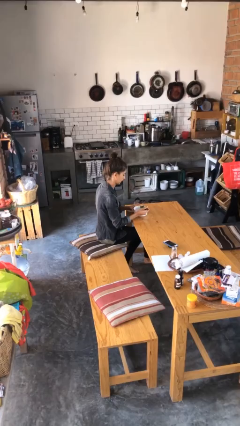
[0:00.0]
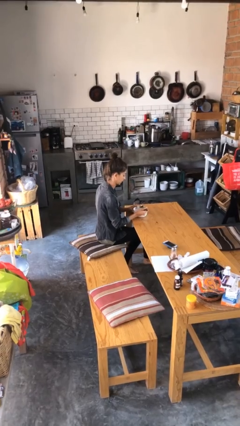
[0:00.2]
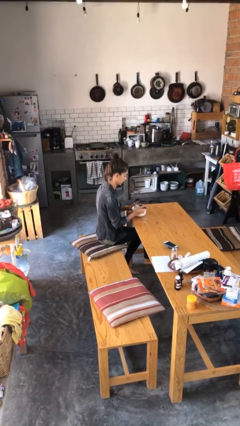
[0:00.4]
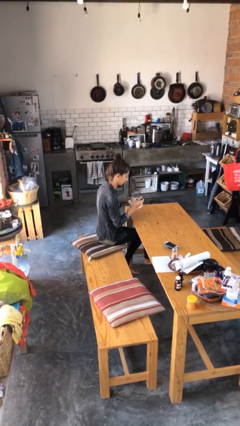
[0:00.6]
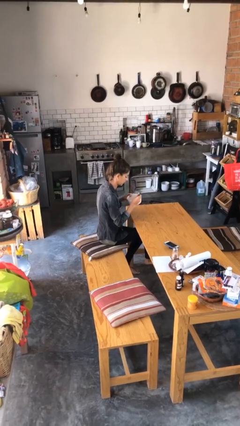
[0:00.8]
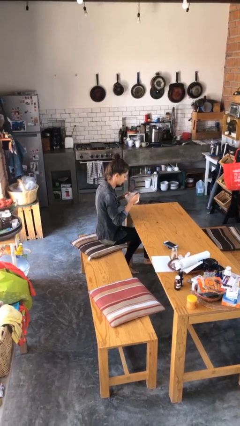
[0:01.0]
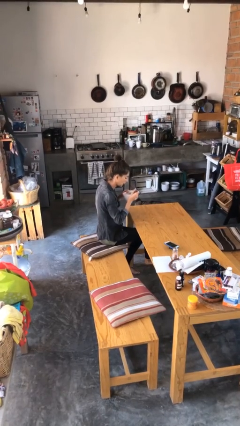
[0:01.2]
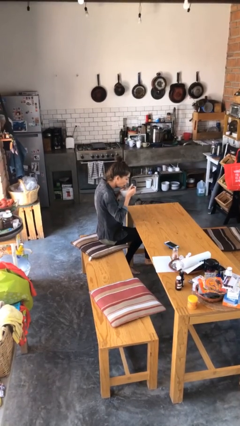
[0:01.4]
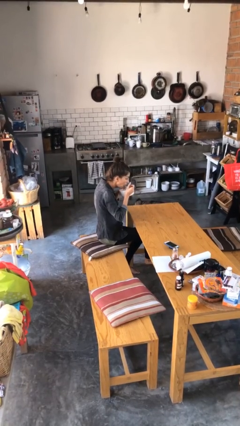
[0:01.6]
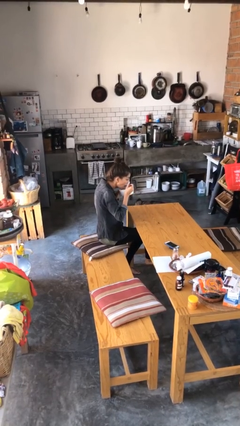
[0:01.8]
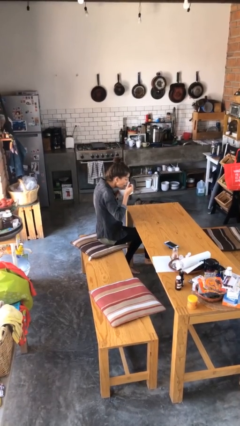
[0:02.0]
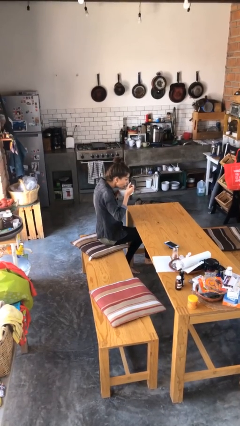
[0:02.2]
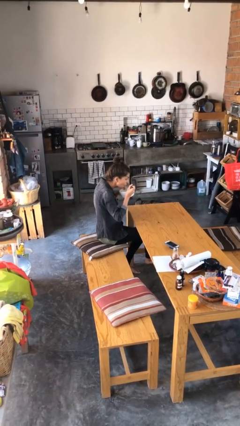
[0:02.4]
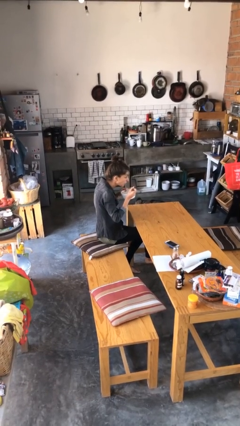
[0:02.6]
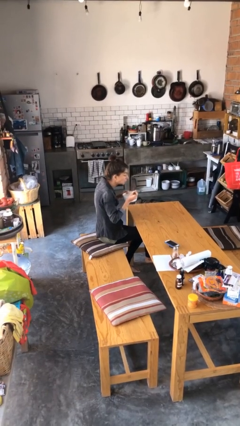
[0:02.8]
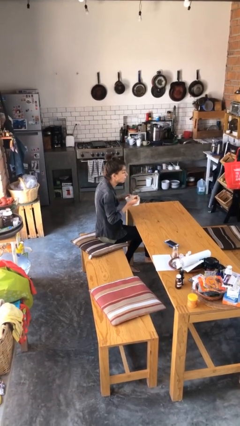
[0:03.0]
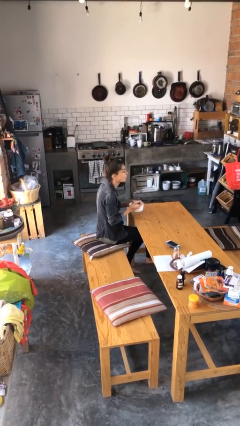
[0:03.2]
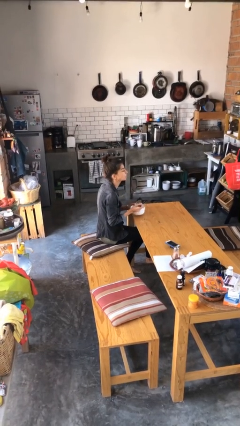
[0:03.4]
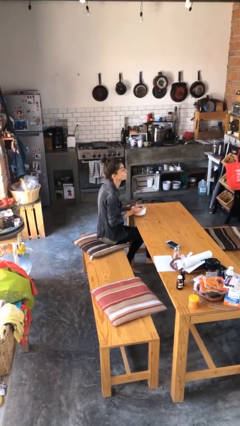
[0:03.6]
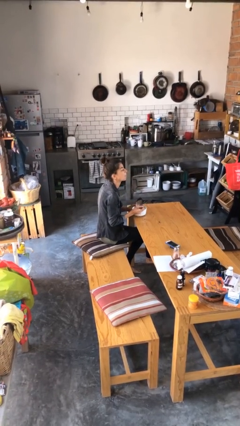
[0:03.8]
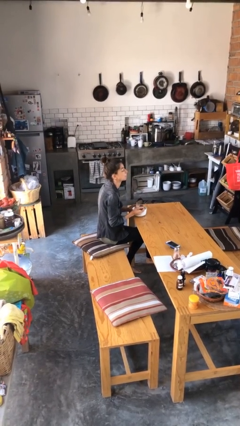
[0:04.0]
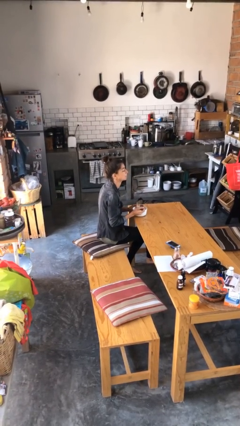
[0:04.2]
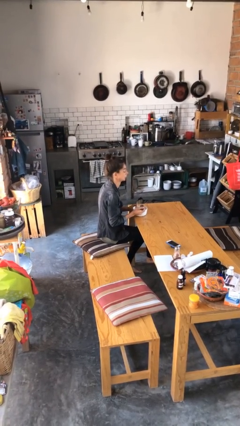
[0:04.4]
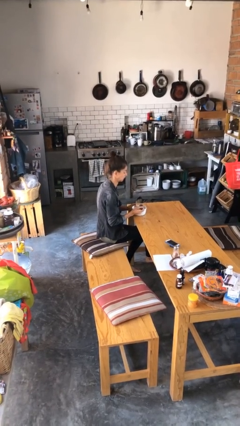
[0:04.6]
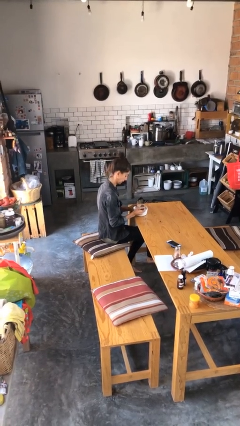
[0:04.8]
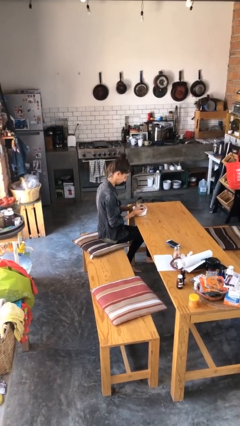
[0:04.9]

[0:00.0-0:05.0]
person eats with utensil

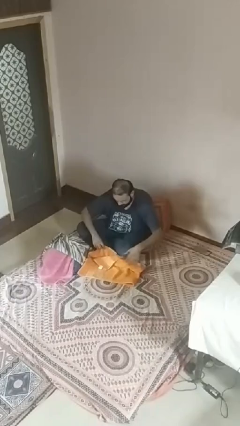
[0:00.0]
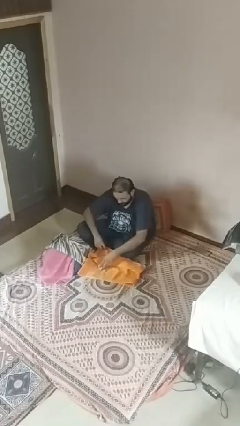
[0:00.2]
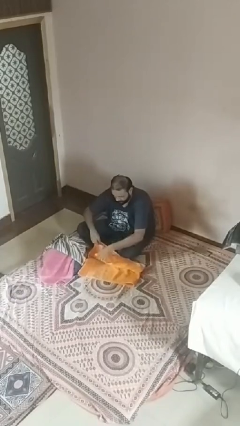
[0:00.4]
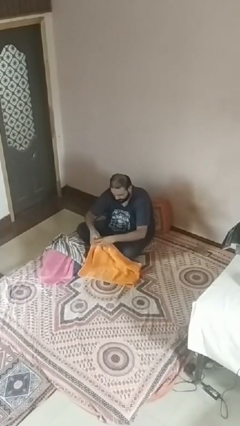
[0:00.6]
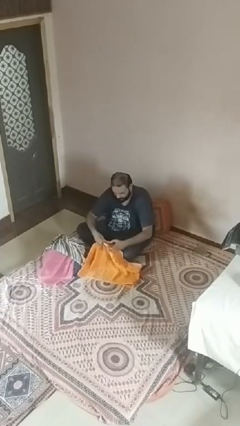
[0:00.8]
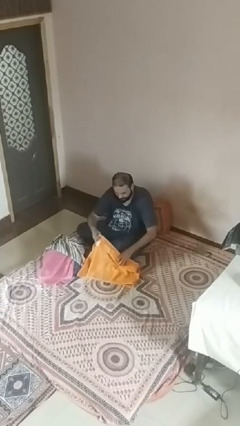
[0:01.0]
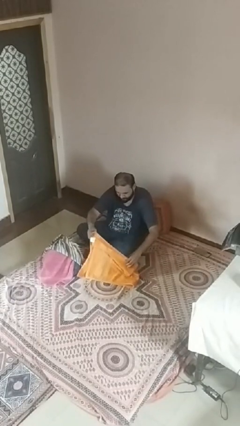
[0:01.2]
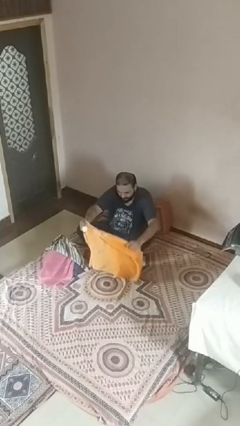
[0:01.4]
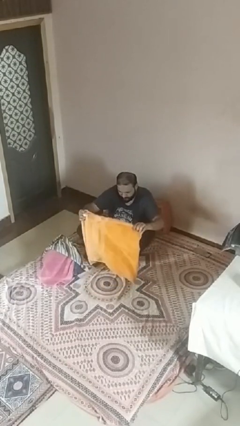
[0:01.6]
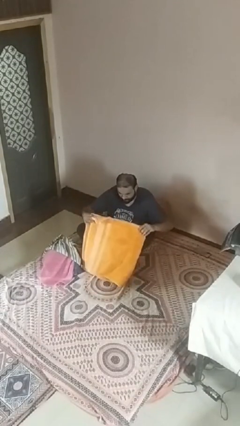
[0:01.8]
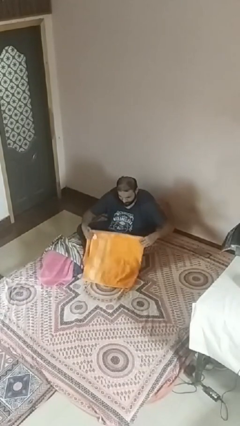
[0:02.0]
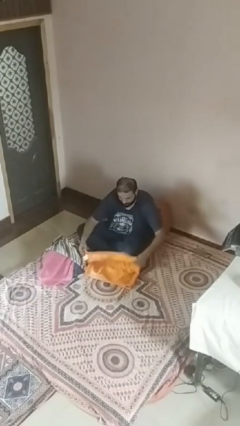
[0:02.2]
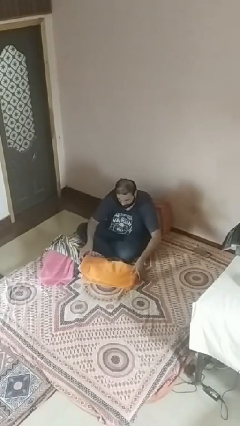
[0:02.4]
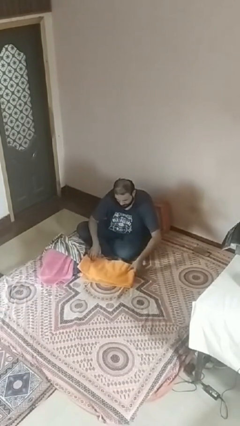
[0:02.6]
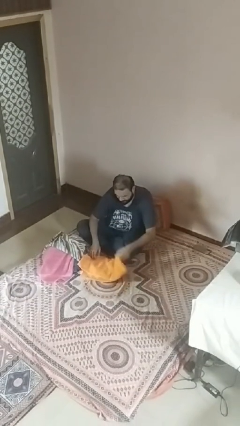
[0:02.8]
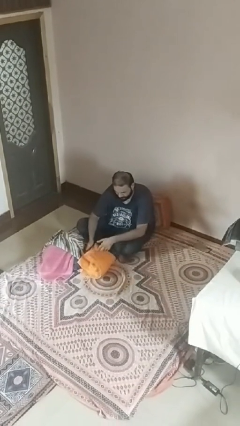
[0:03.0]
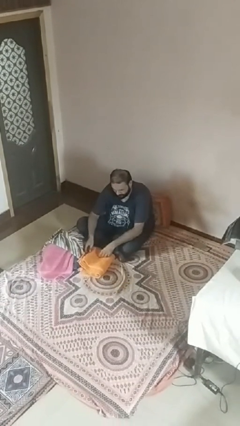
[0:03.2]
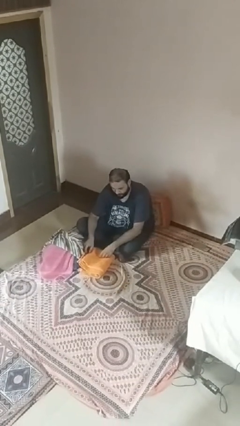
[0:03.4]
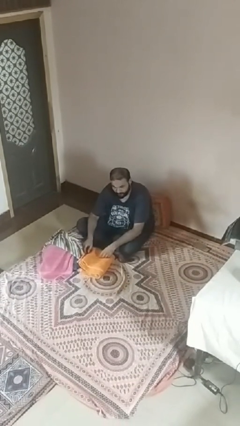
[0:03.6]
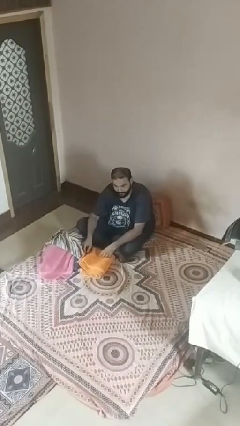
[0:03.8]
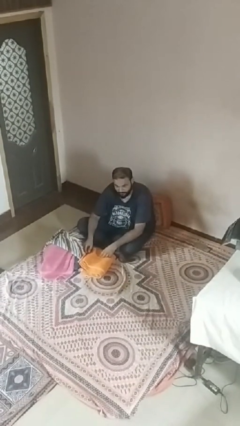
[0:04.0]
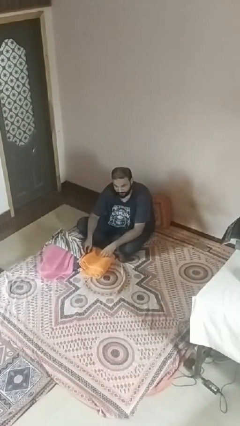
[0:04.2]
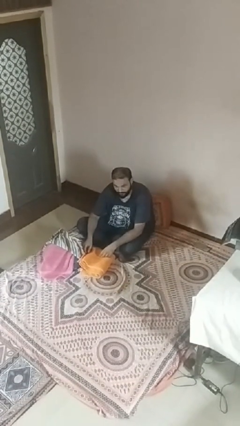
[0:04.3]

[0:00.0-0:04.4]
person folds towel

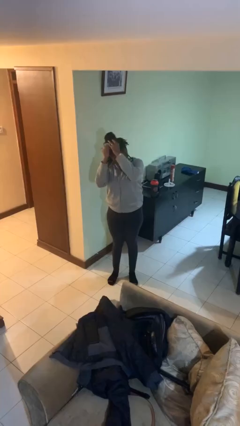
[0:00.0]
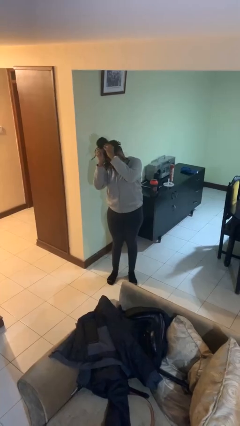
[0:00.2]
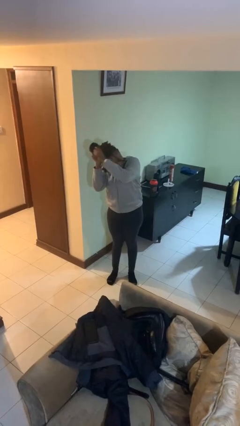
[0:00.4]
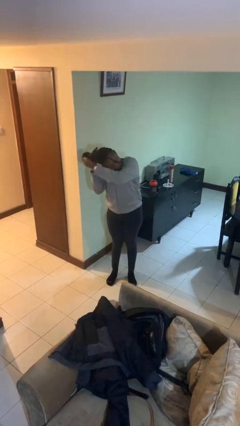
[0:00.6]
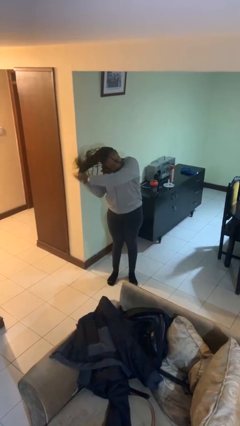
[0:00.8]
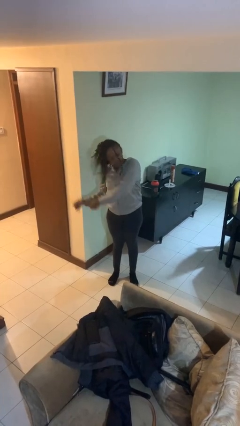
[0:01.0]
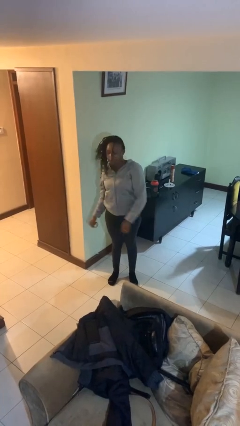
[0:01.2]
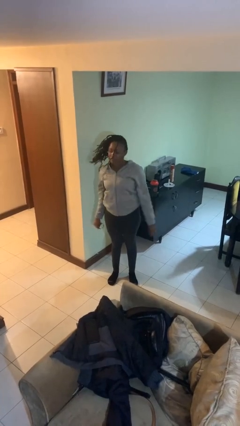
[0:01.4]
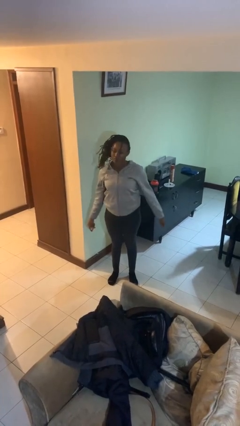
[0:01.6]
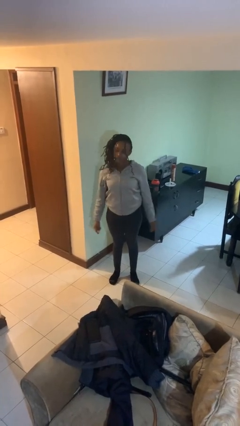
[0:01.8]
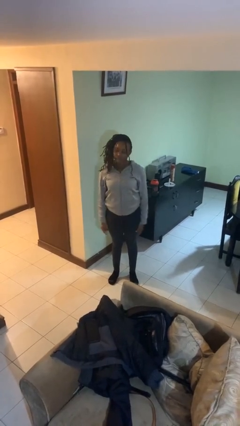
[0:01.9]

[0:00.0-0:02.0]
person takes off hairtie

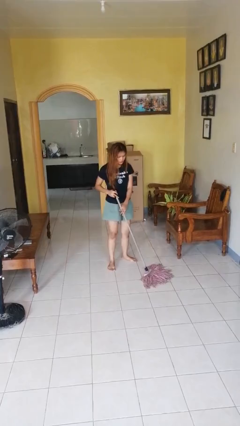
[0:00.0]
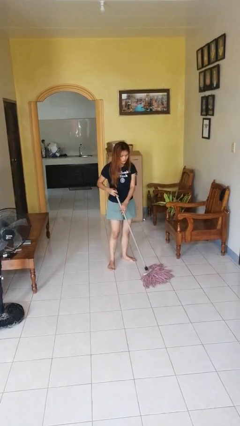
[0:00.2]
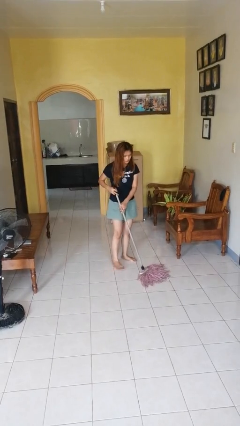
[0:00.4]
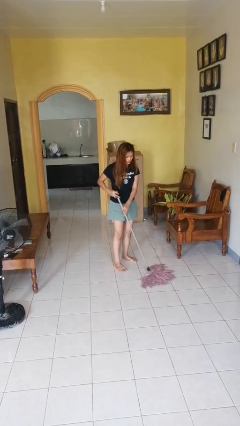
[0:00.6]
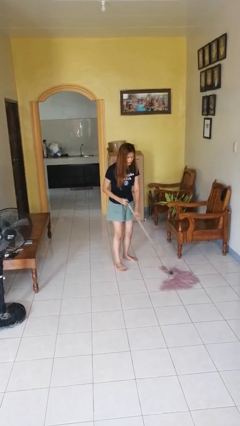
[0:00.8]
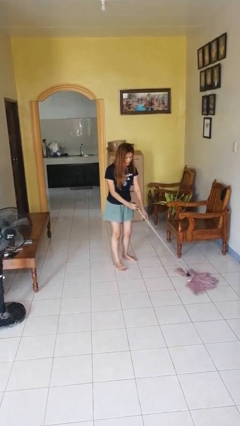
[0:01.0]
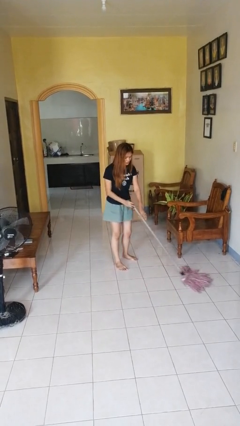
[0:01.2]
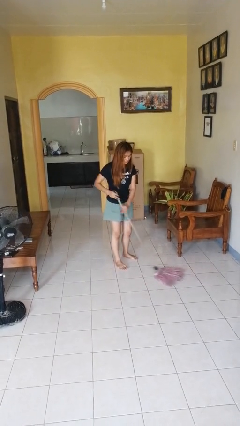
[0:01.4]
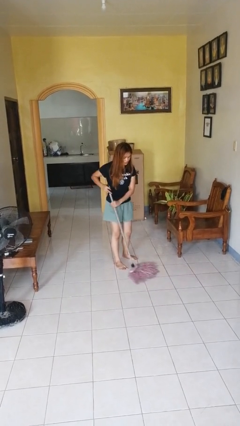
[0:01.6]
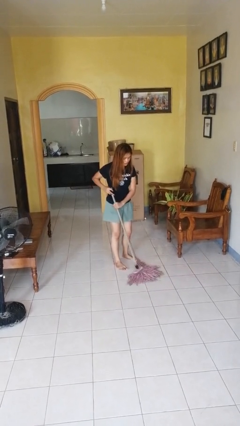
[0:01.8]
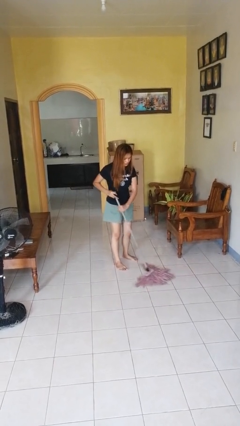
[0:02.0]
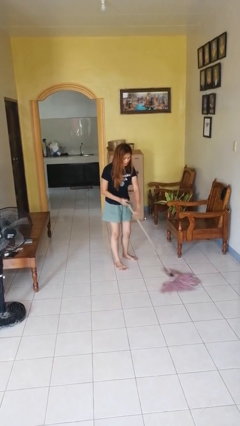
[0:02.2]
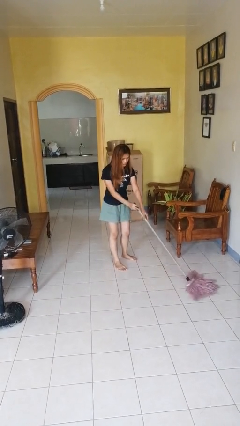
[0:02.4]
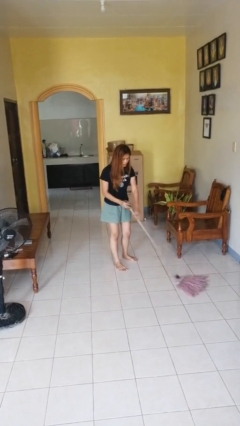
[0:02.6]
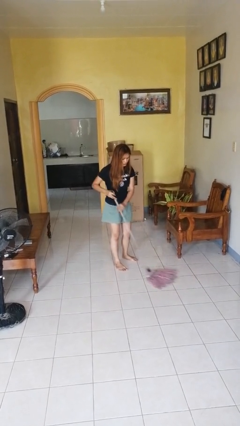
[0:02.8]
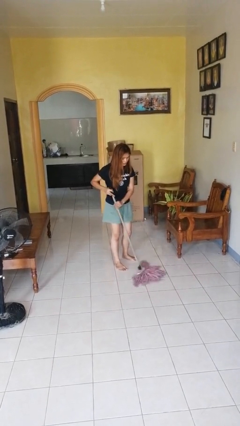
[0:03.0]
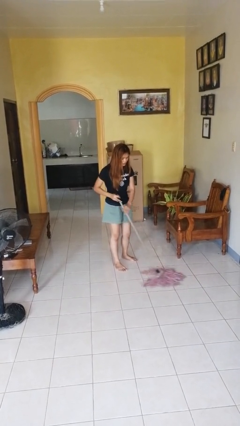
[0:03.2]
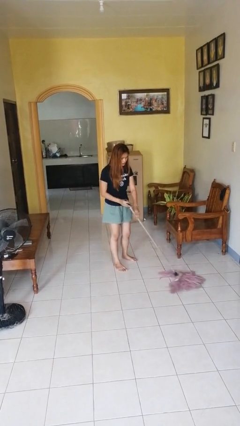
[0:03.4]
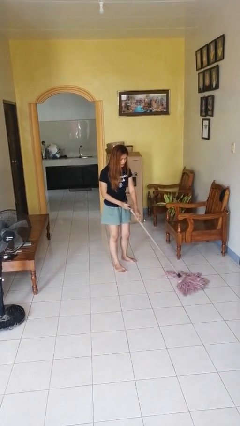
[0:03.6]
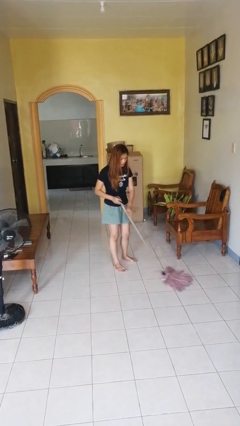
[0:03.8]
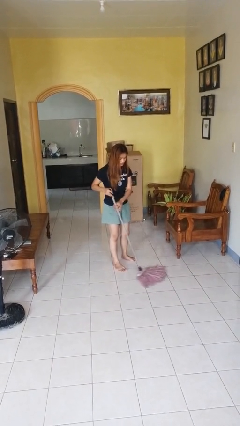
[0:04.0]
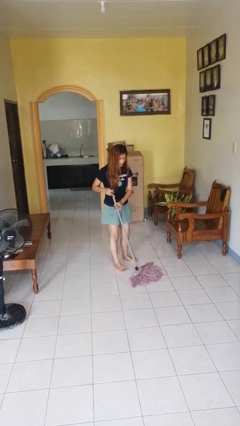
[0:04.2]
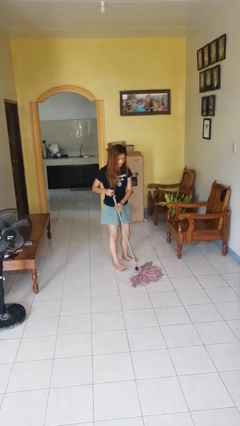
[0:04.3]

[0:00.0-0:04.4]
person mops

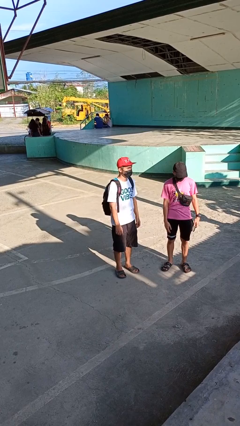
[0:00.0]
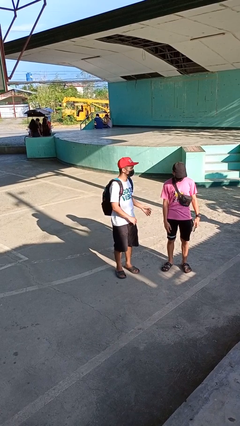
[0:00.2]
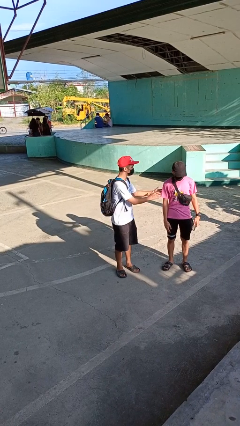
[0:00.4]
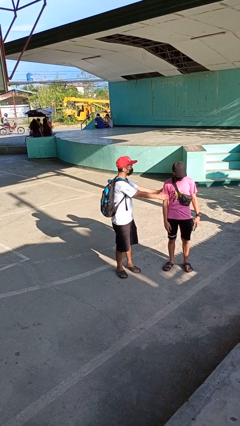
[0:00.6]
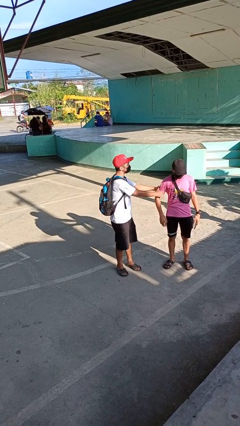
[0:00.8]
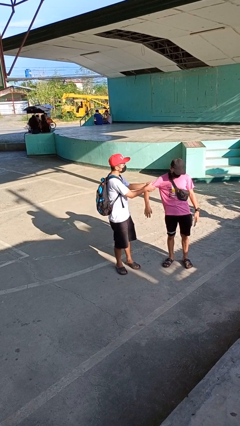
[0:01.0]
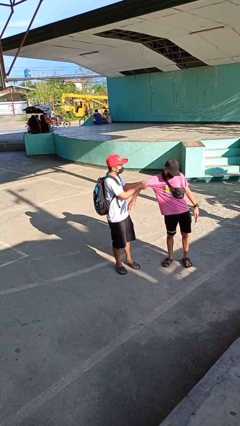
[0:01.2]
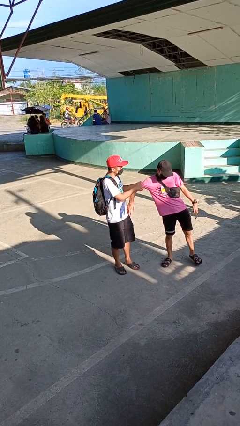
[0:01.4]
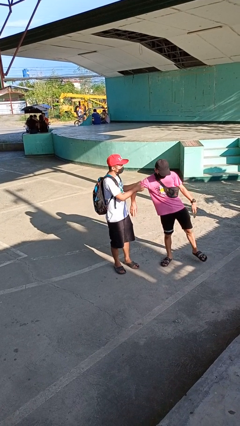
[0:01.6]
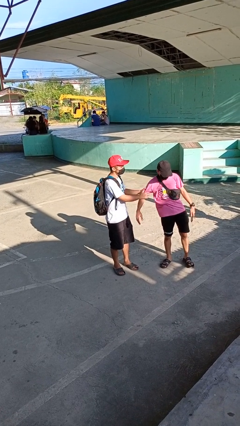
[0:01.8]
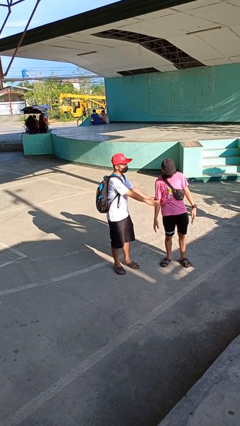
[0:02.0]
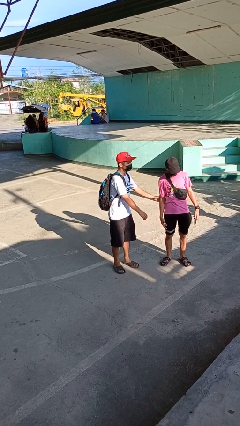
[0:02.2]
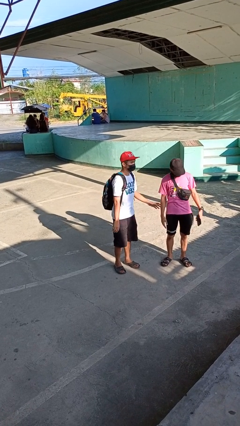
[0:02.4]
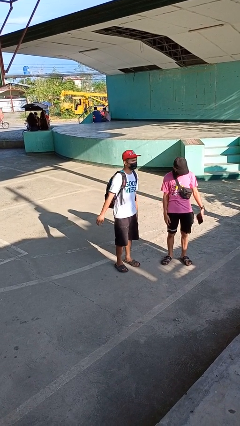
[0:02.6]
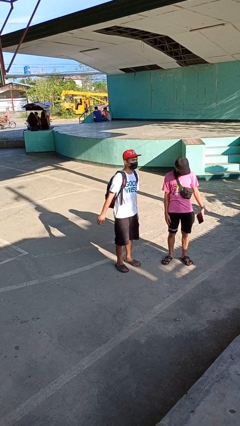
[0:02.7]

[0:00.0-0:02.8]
person grabs person by bicep
